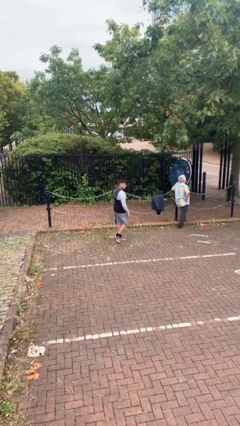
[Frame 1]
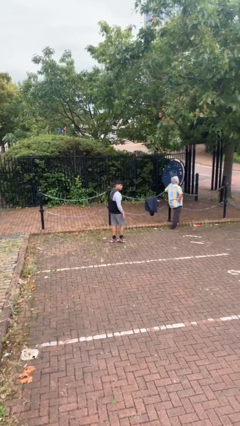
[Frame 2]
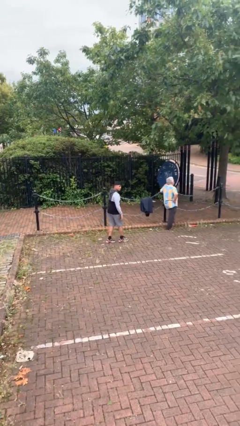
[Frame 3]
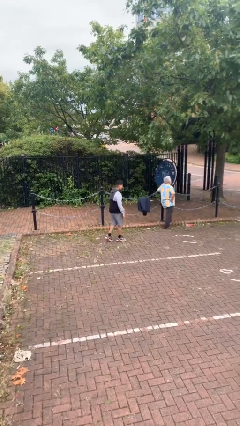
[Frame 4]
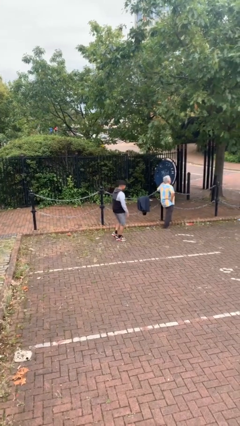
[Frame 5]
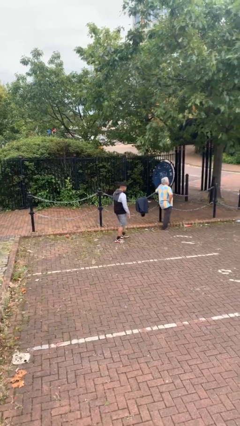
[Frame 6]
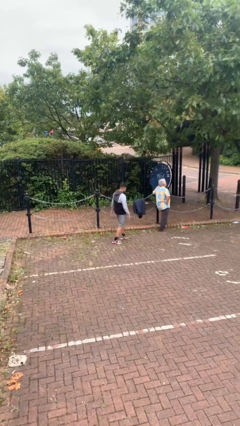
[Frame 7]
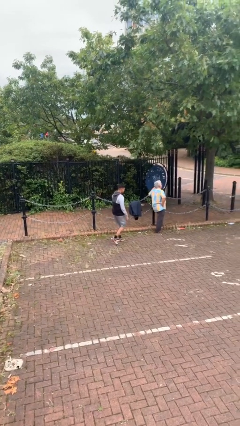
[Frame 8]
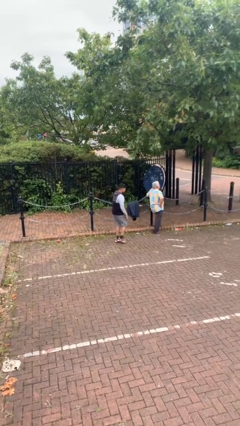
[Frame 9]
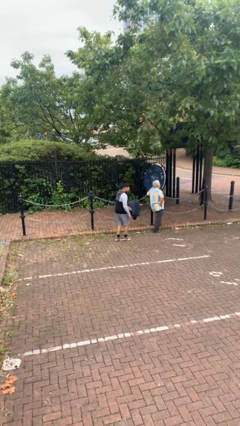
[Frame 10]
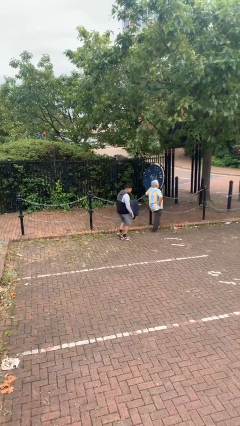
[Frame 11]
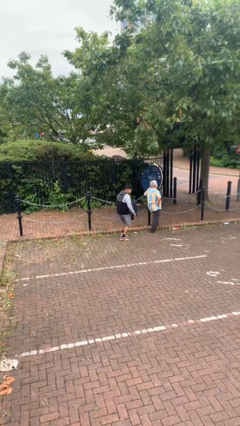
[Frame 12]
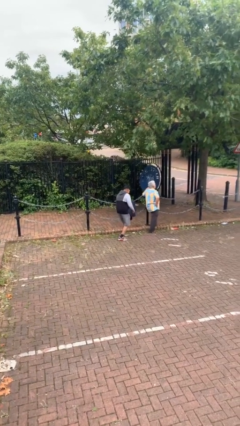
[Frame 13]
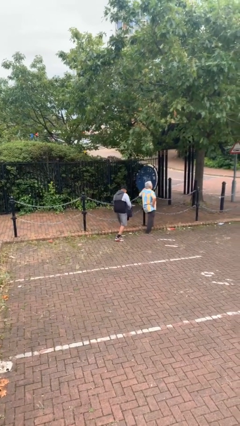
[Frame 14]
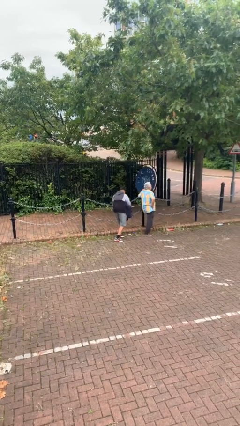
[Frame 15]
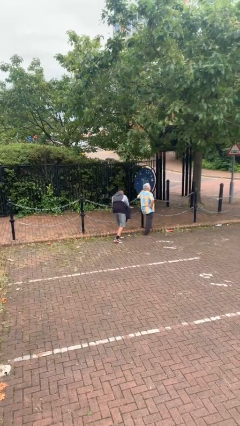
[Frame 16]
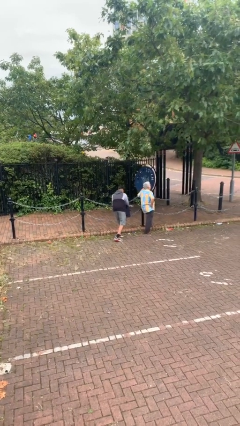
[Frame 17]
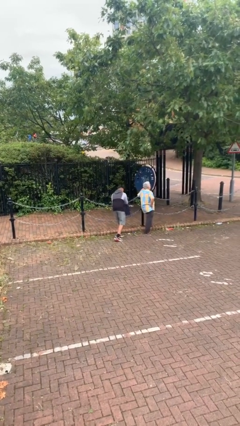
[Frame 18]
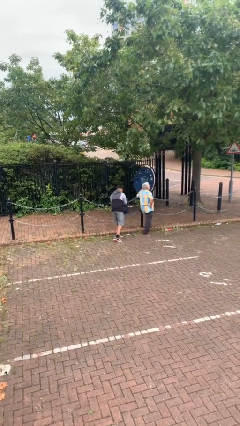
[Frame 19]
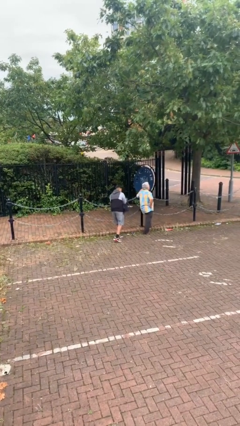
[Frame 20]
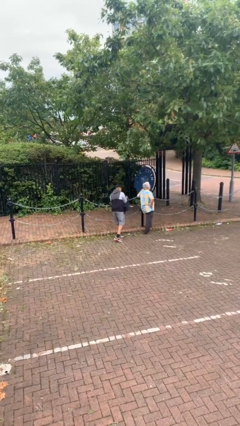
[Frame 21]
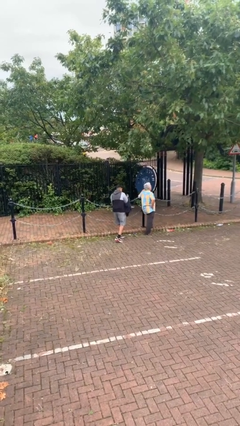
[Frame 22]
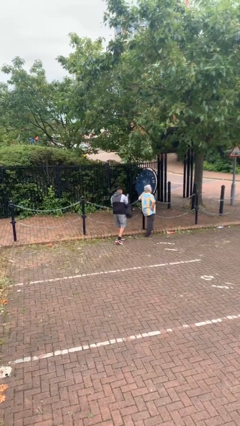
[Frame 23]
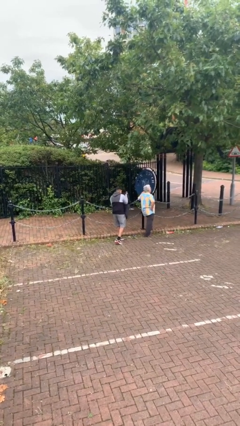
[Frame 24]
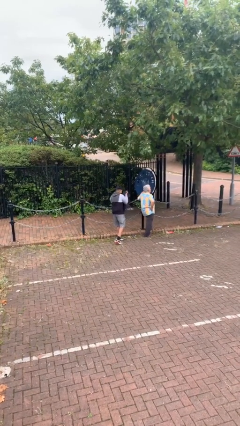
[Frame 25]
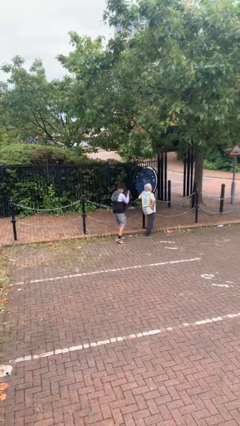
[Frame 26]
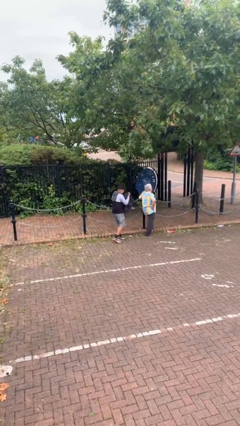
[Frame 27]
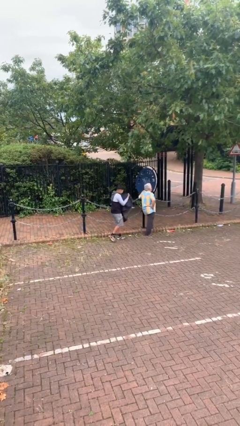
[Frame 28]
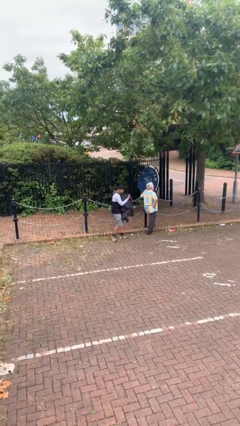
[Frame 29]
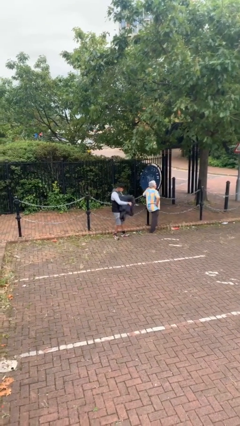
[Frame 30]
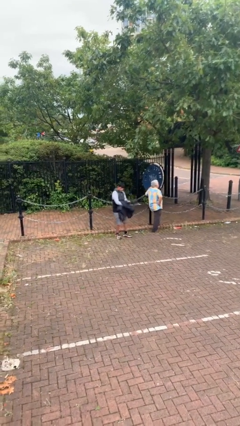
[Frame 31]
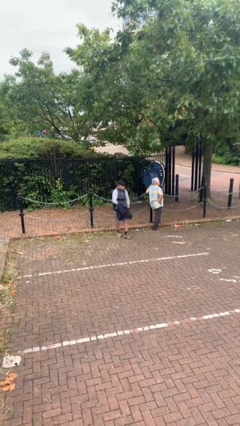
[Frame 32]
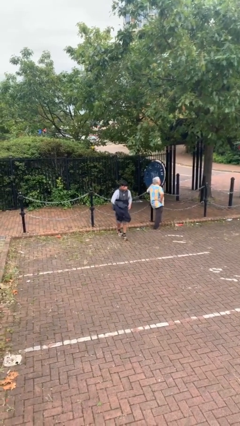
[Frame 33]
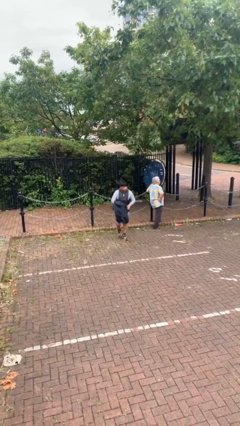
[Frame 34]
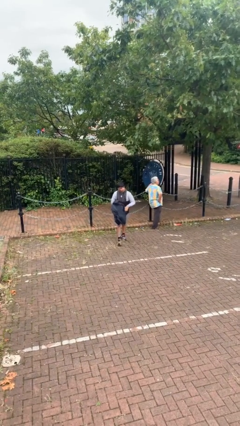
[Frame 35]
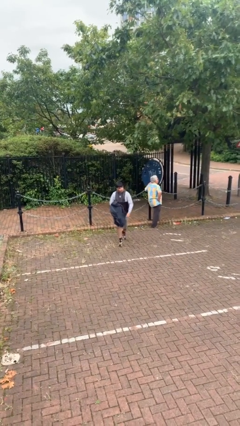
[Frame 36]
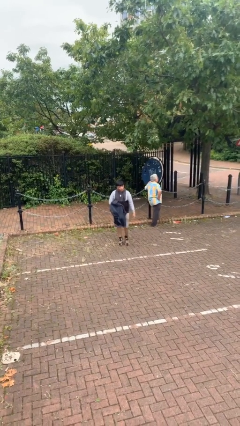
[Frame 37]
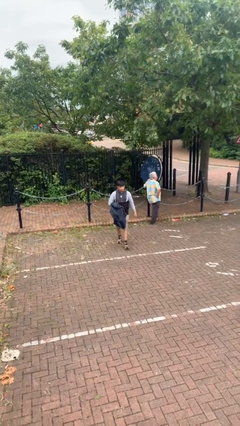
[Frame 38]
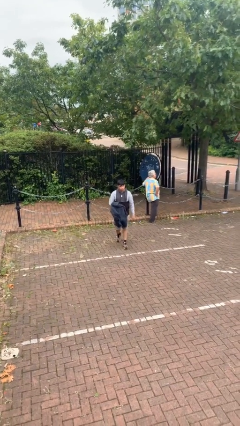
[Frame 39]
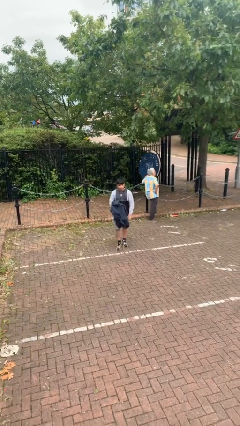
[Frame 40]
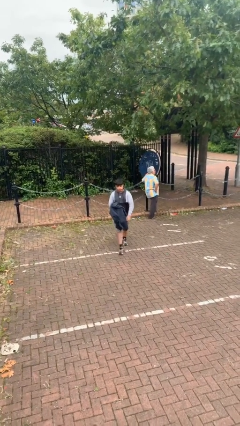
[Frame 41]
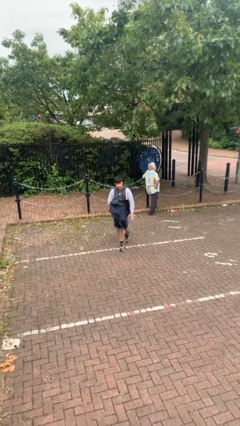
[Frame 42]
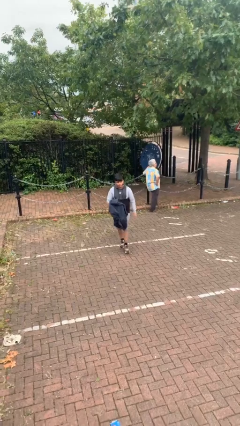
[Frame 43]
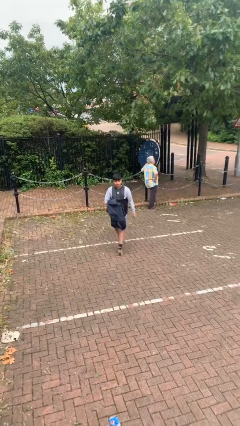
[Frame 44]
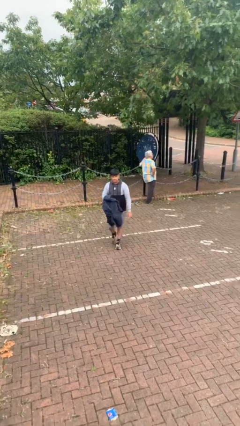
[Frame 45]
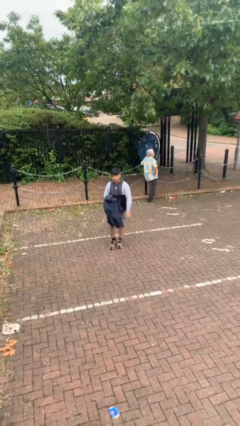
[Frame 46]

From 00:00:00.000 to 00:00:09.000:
person steals object from person

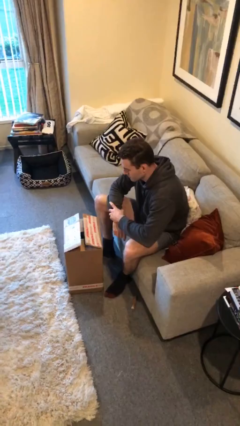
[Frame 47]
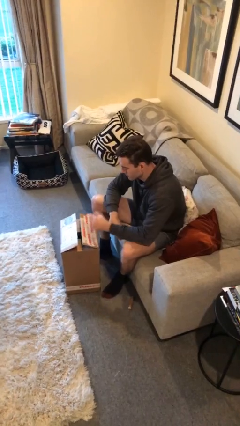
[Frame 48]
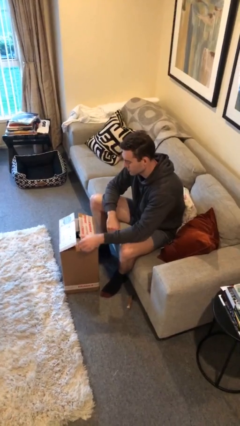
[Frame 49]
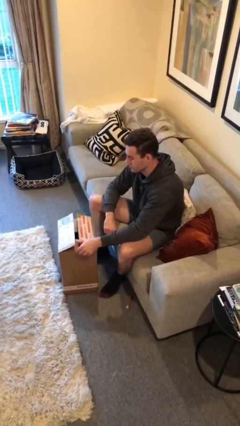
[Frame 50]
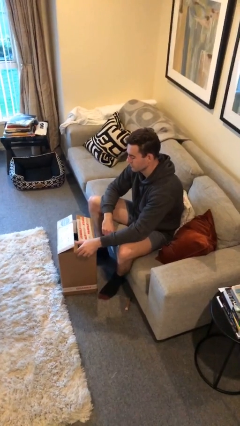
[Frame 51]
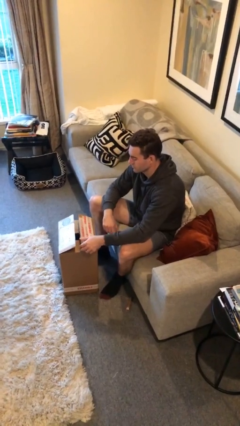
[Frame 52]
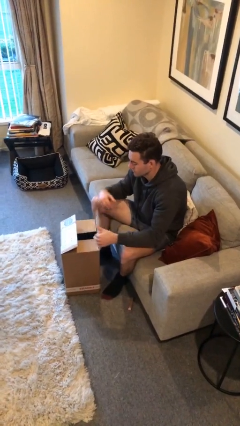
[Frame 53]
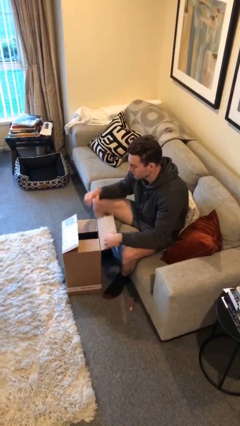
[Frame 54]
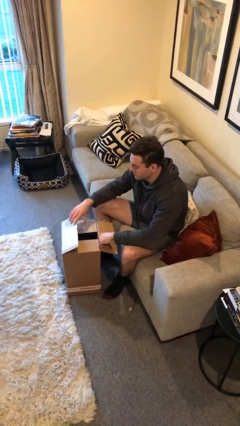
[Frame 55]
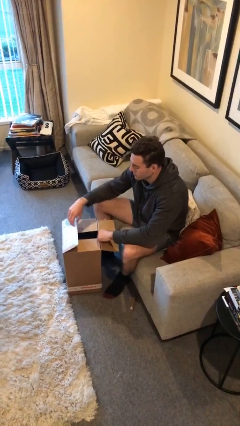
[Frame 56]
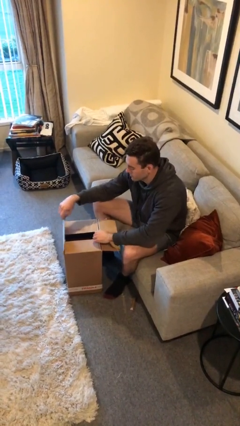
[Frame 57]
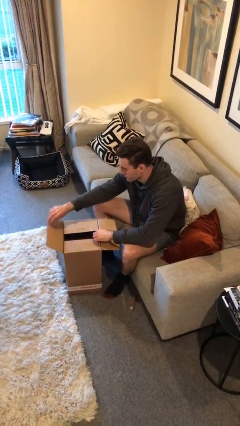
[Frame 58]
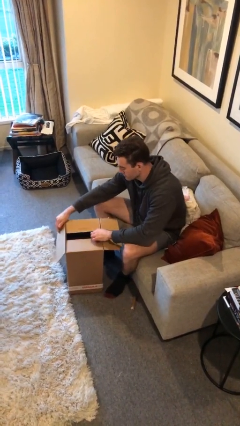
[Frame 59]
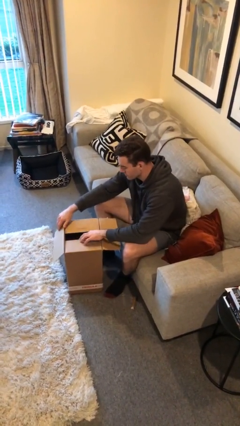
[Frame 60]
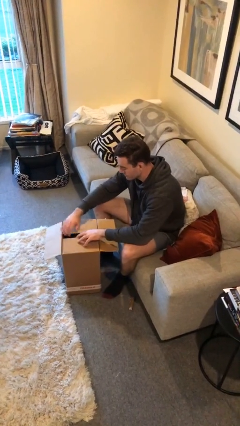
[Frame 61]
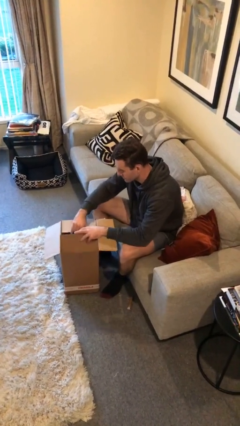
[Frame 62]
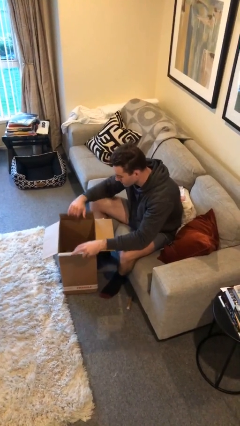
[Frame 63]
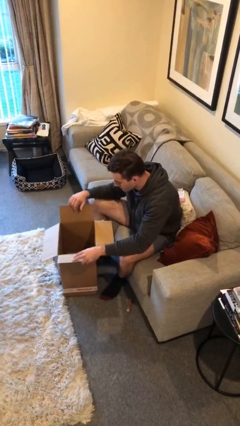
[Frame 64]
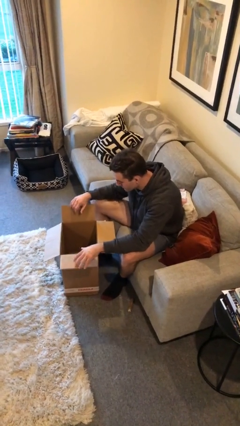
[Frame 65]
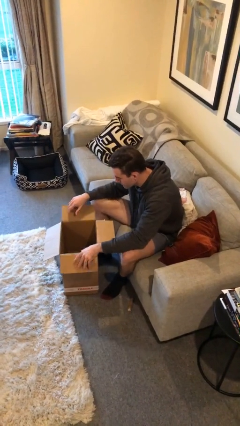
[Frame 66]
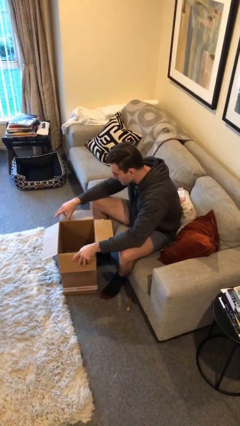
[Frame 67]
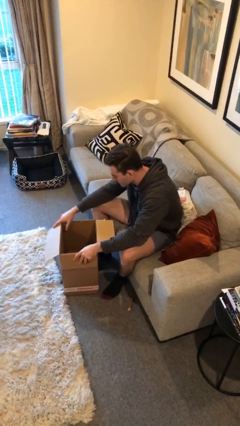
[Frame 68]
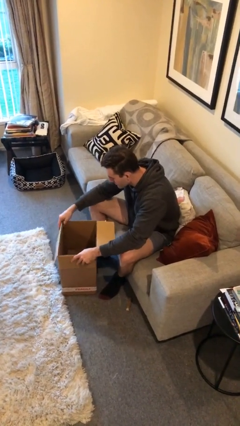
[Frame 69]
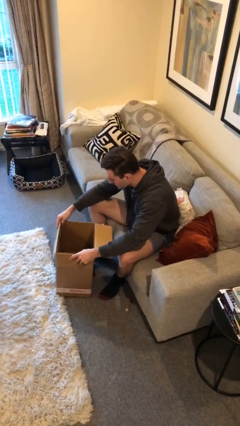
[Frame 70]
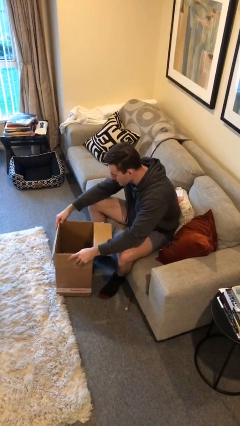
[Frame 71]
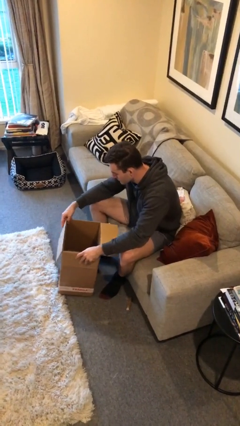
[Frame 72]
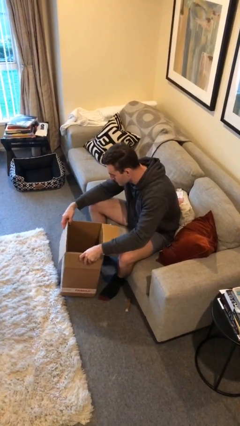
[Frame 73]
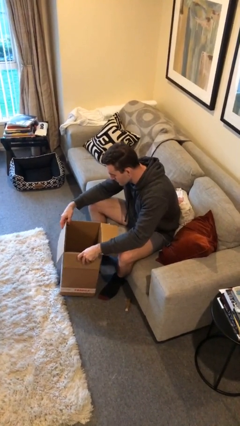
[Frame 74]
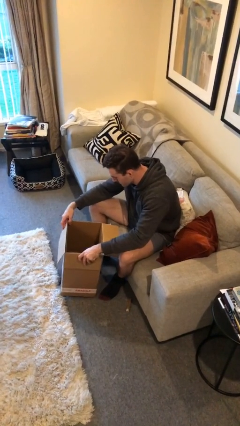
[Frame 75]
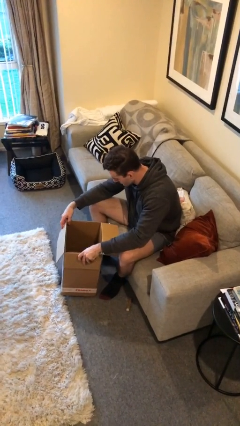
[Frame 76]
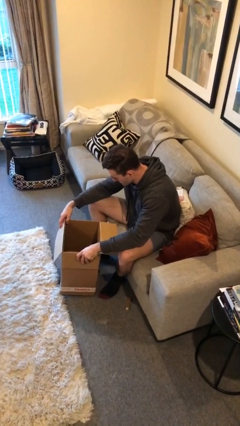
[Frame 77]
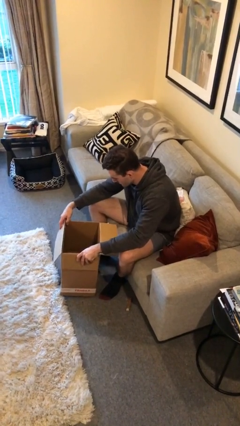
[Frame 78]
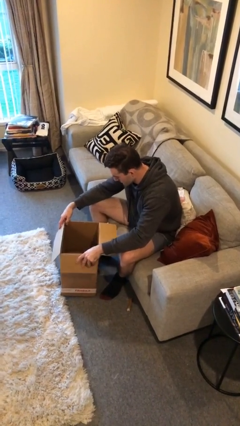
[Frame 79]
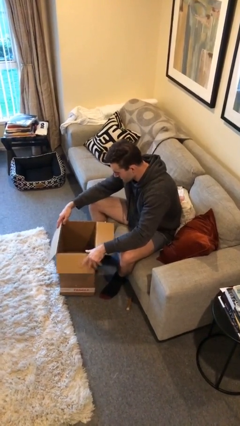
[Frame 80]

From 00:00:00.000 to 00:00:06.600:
person opens box

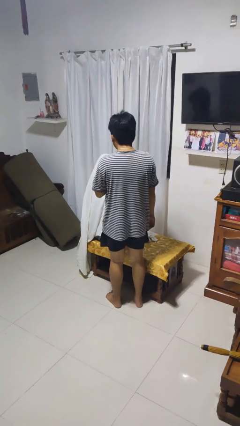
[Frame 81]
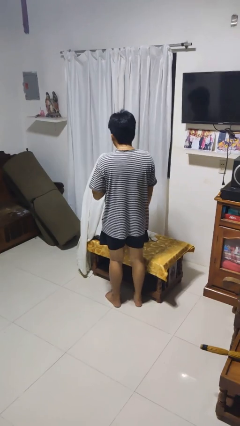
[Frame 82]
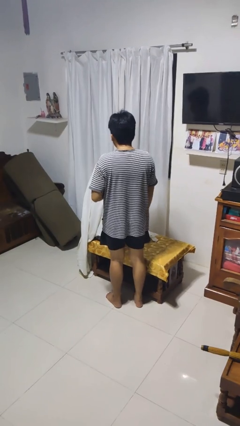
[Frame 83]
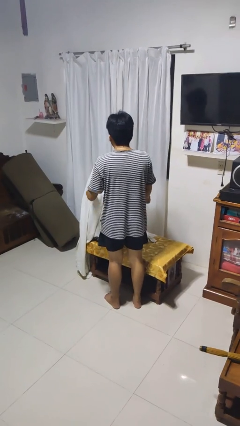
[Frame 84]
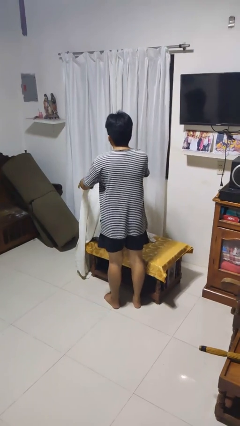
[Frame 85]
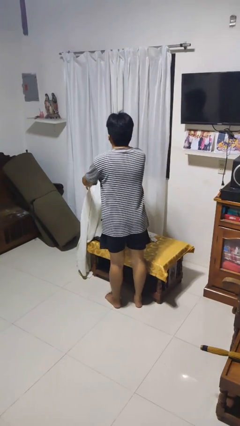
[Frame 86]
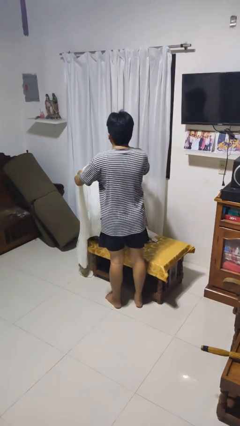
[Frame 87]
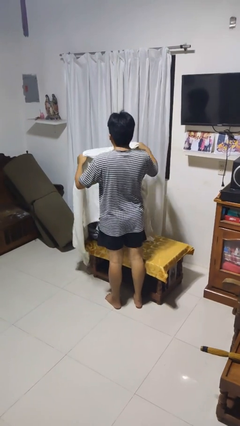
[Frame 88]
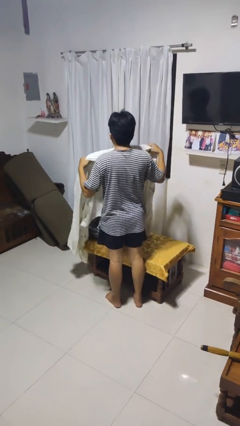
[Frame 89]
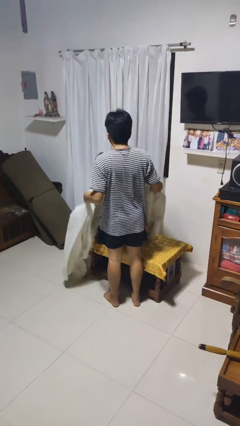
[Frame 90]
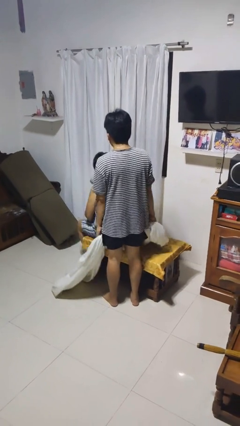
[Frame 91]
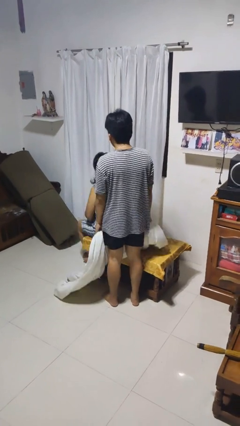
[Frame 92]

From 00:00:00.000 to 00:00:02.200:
person uncovers friend with blanket

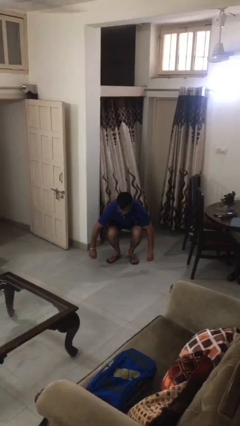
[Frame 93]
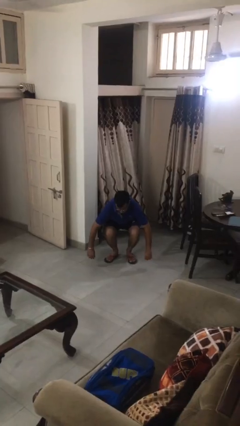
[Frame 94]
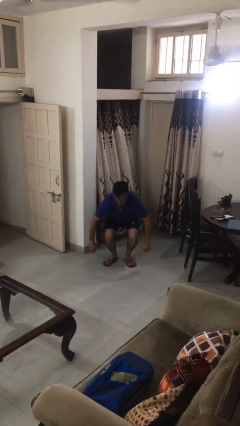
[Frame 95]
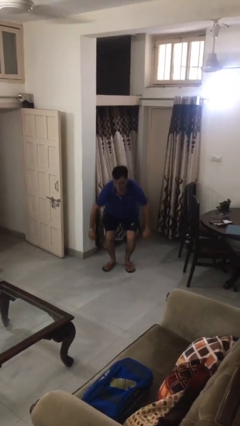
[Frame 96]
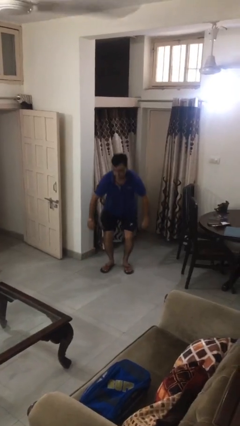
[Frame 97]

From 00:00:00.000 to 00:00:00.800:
person stands up
